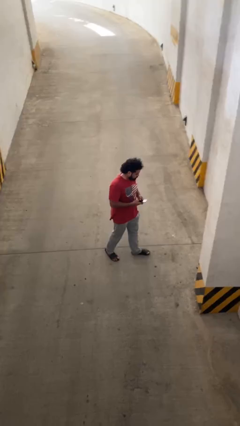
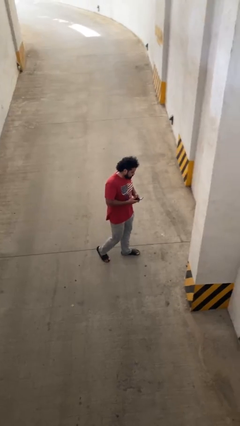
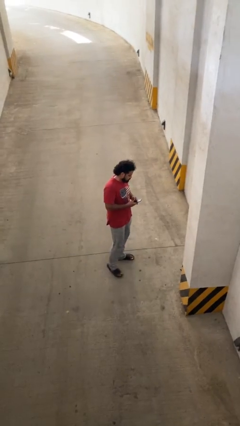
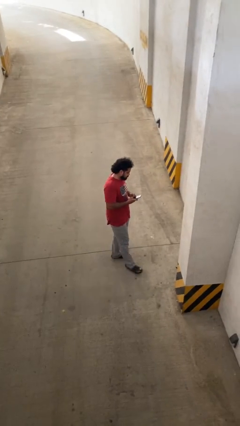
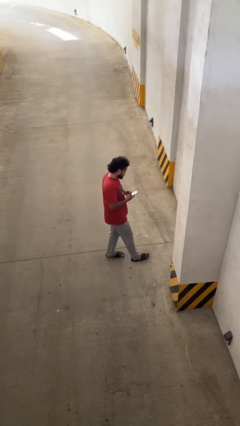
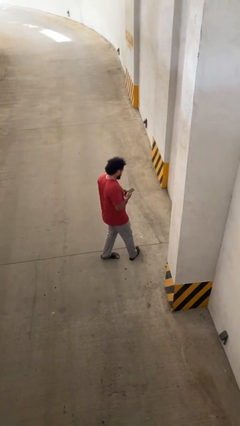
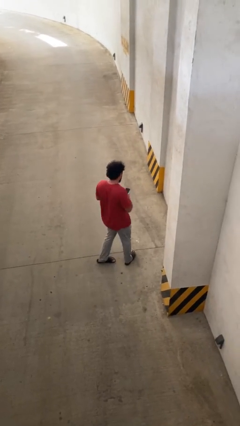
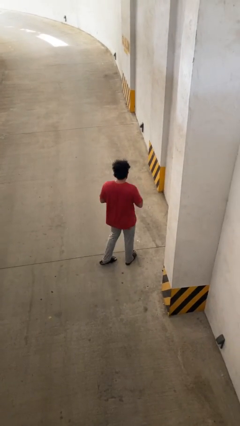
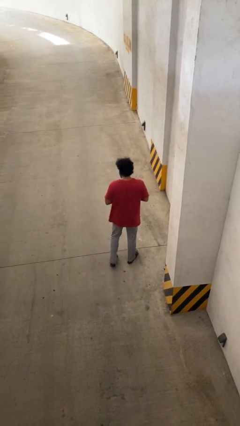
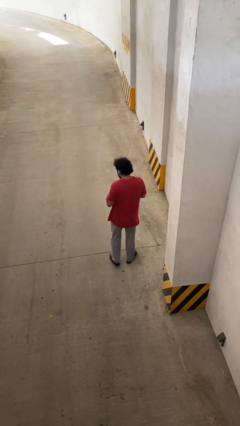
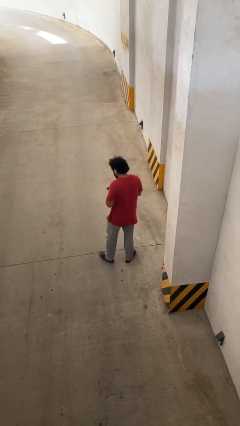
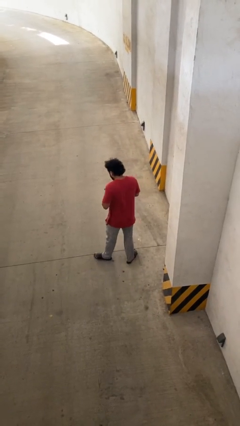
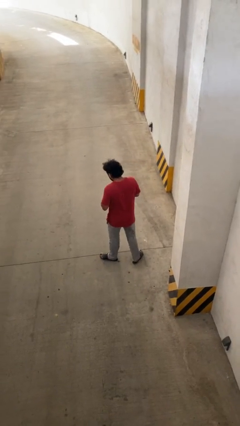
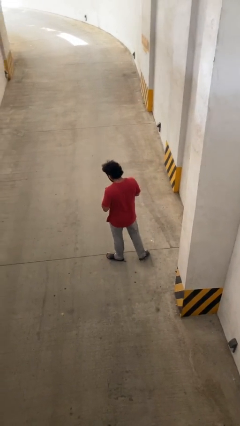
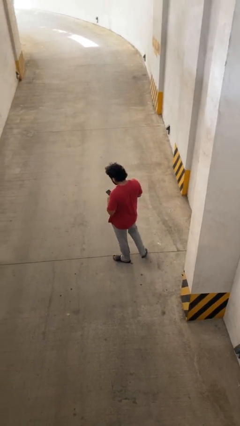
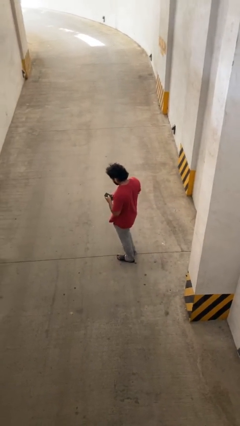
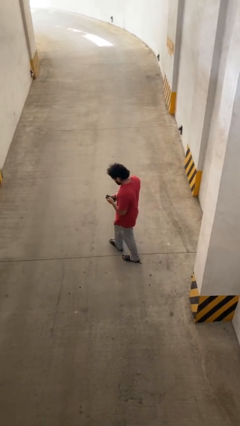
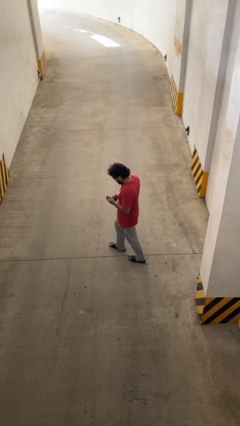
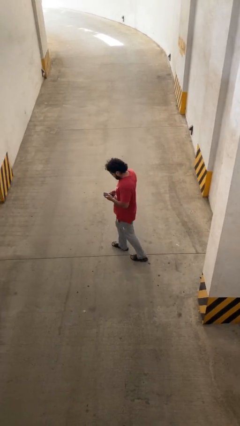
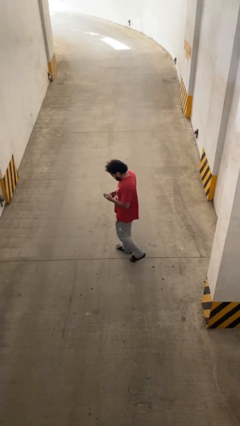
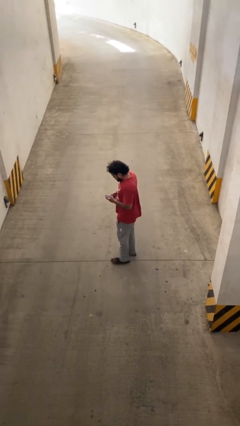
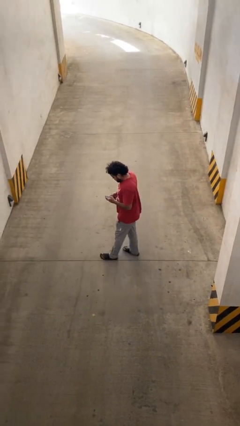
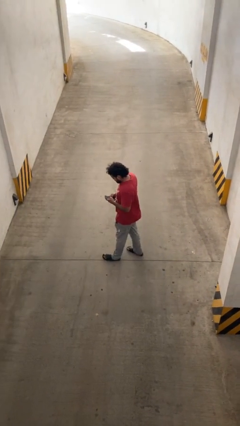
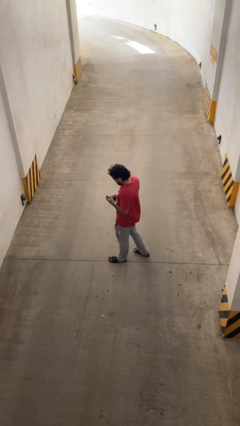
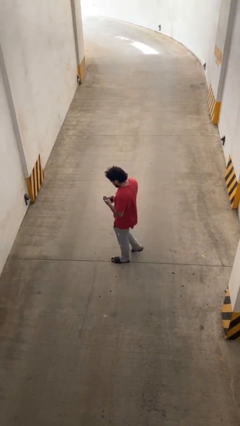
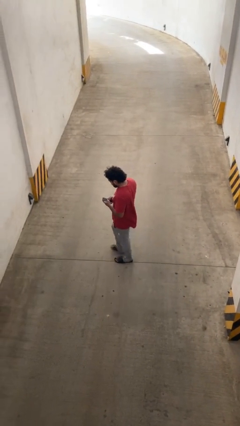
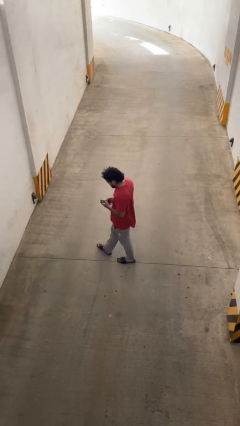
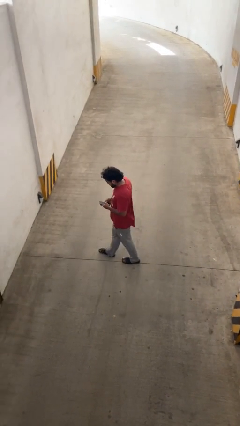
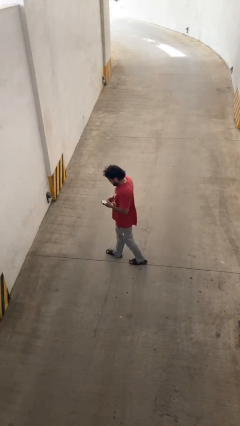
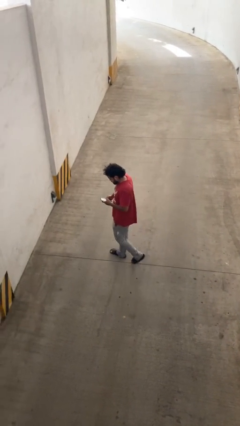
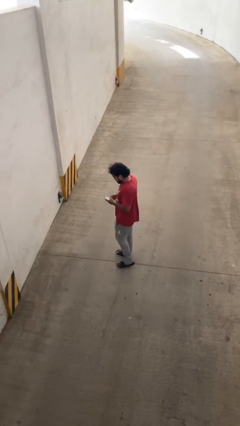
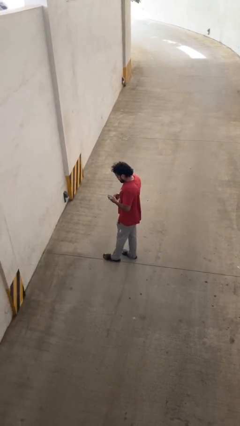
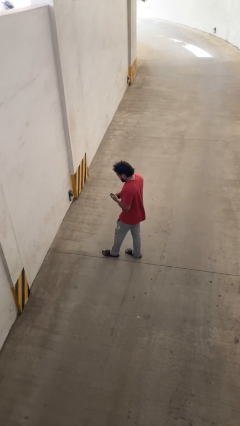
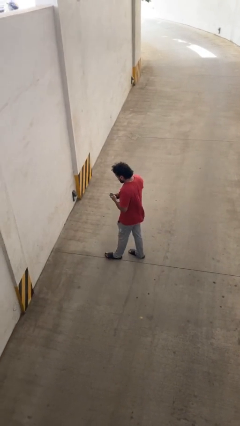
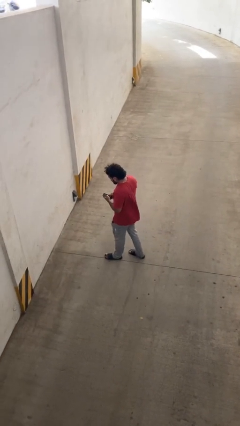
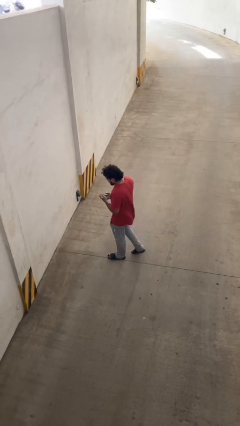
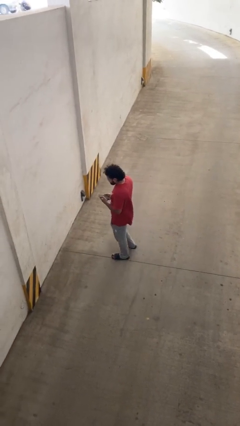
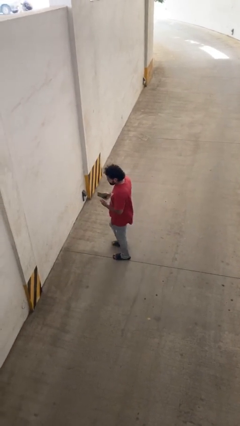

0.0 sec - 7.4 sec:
person texts on phone

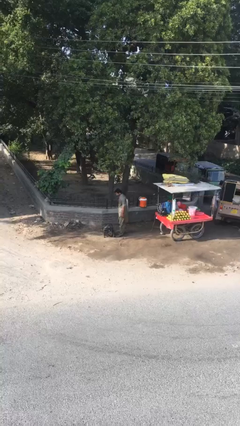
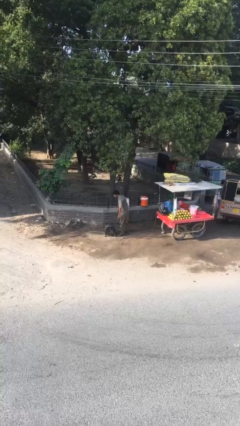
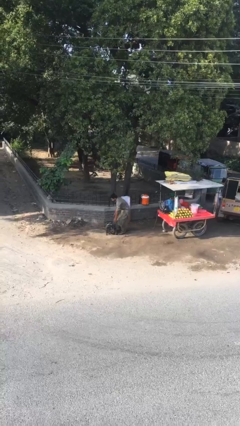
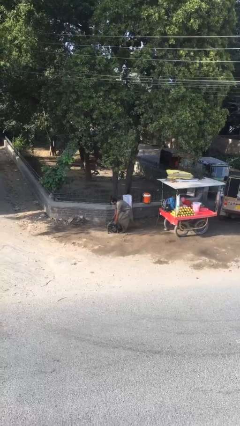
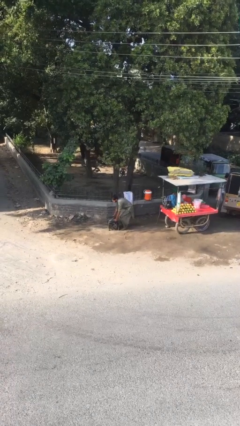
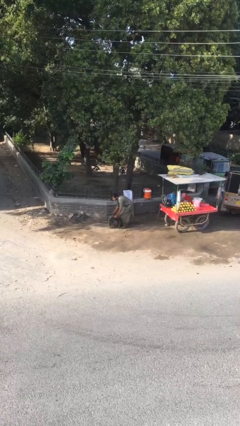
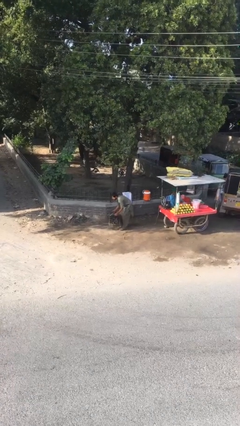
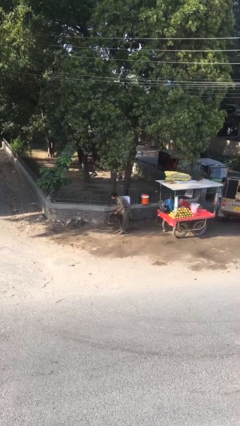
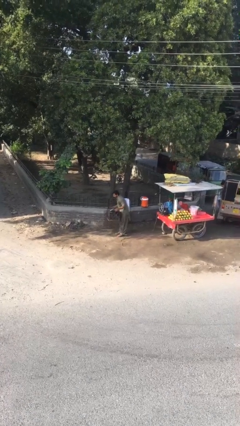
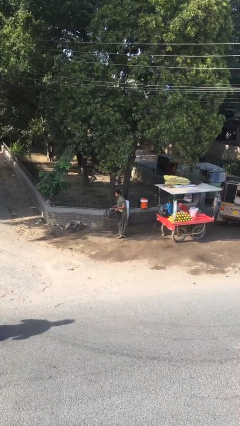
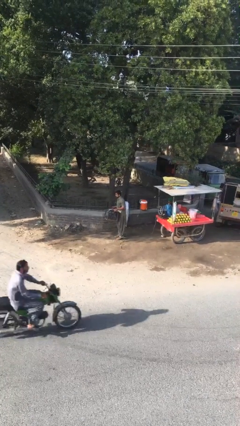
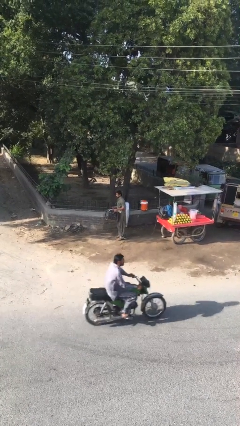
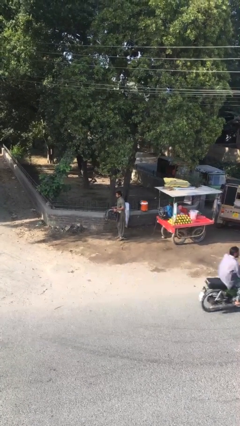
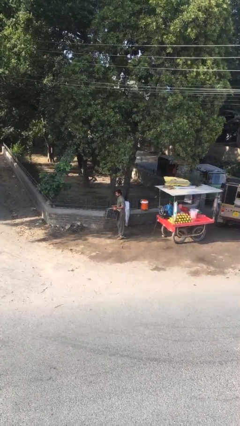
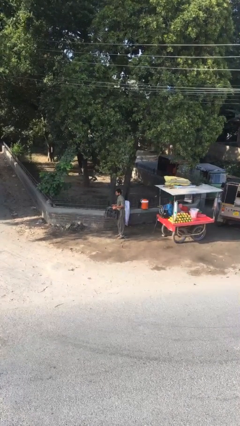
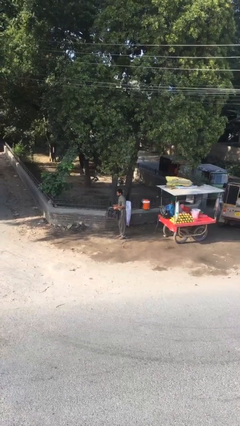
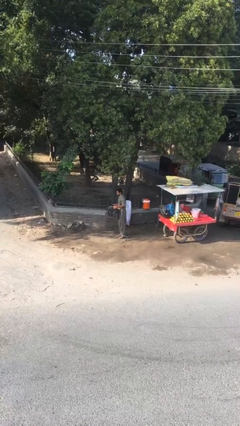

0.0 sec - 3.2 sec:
person picks up object from floor

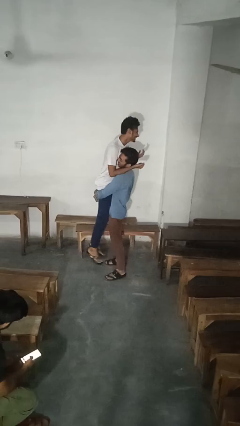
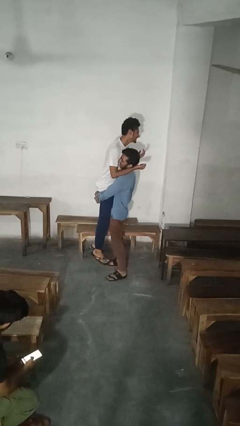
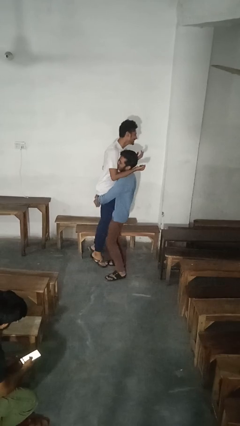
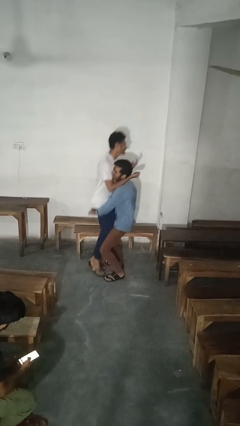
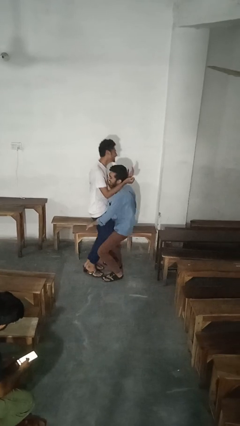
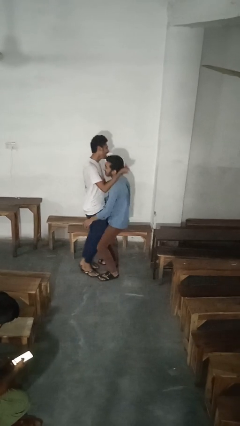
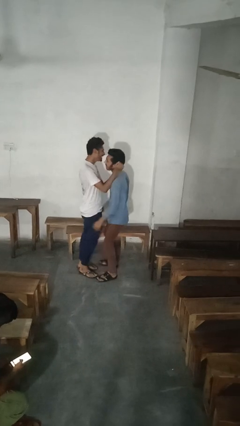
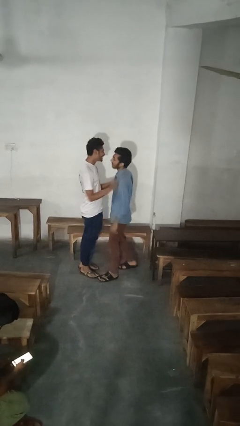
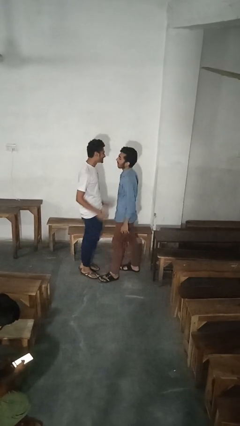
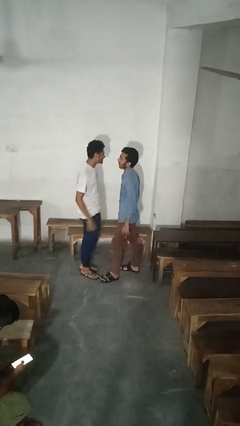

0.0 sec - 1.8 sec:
person puts down person

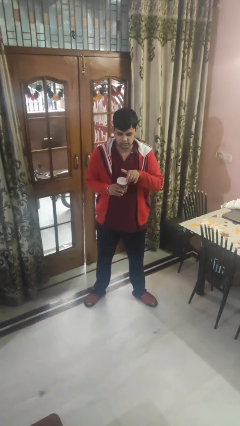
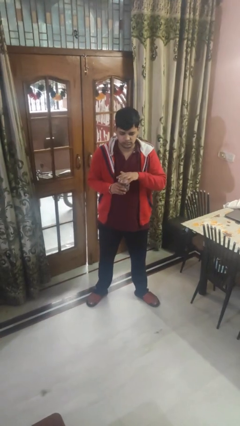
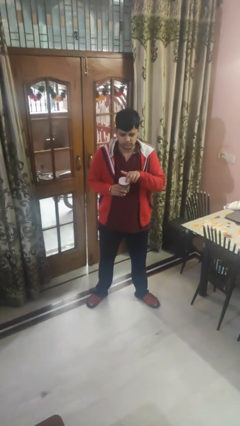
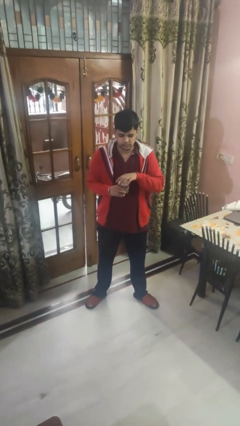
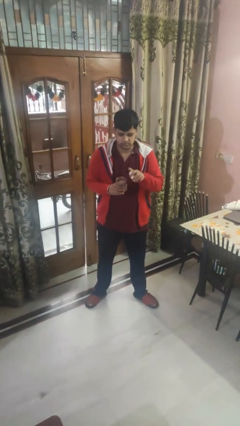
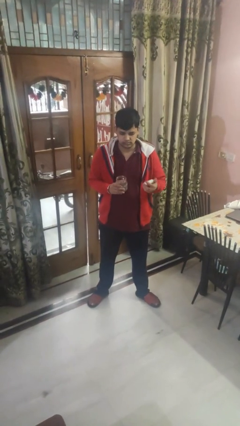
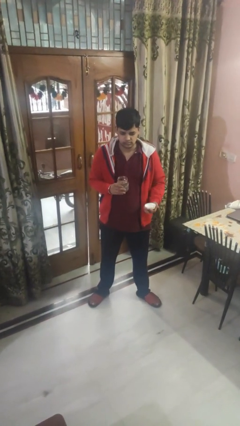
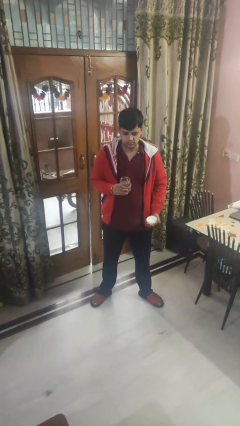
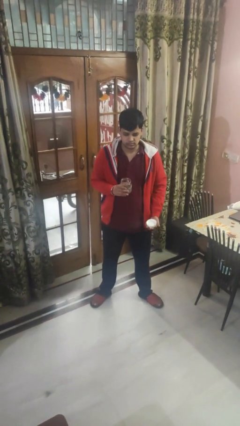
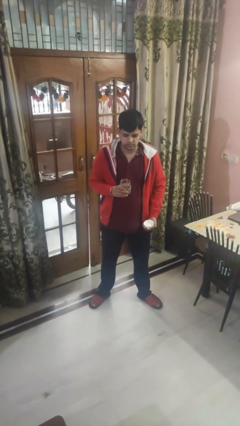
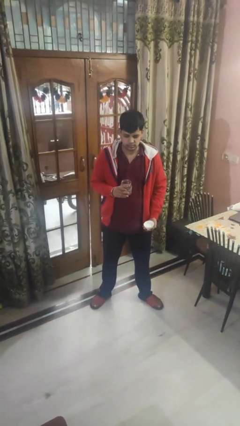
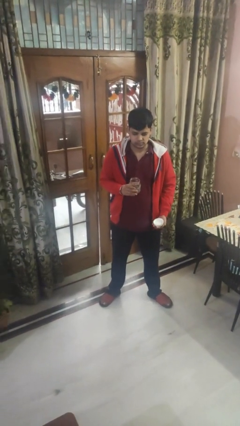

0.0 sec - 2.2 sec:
person opens jar

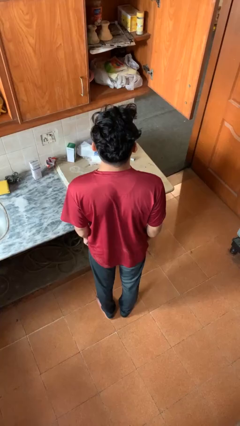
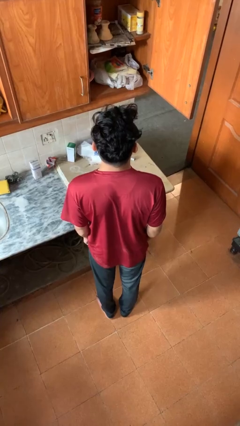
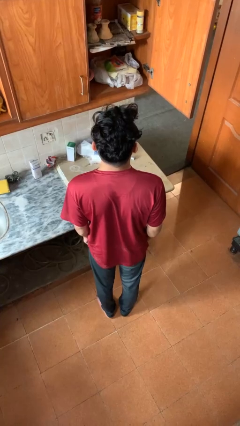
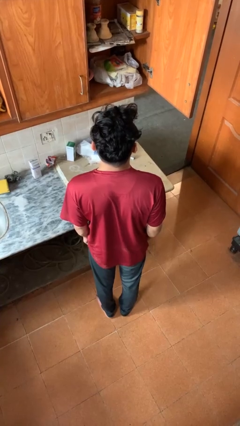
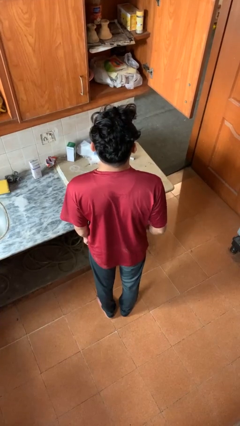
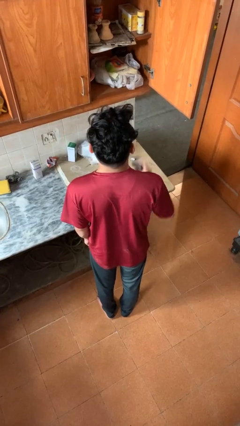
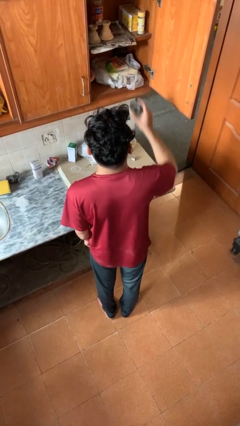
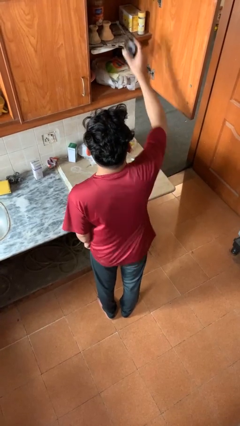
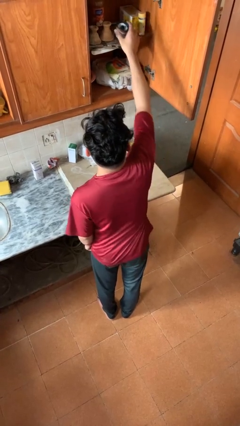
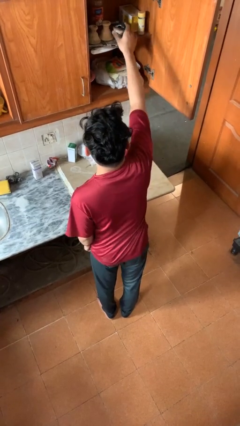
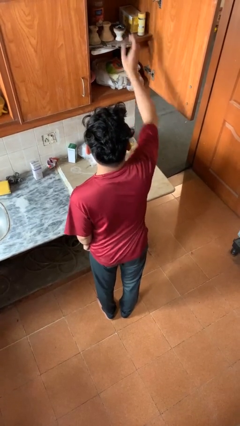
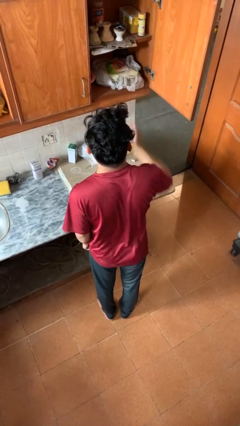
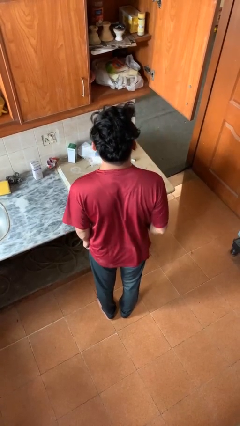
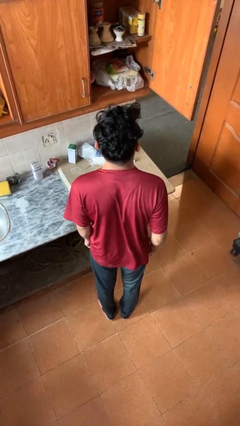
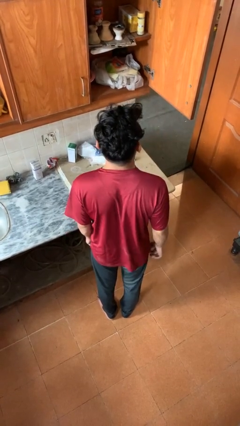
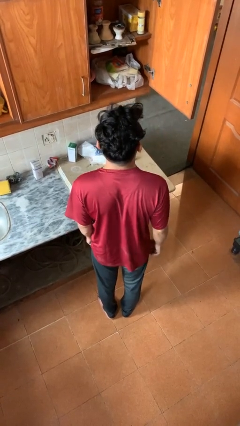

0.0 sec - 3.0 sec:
person puts object in cabinet
